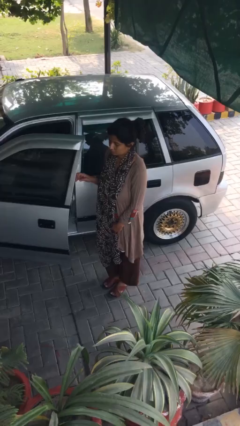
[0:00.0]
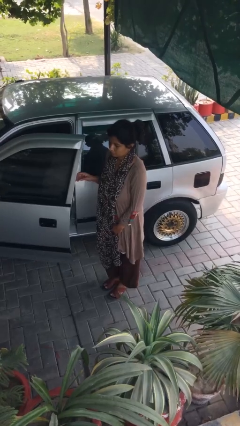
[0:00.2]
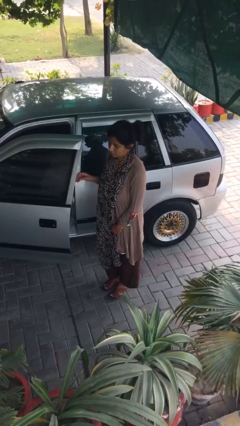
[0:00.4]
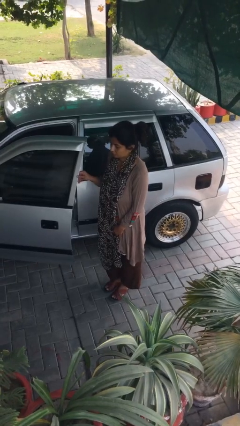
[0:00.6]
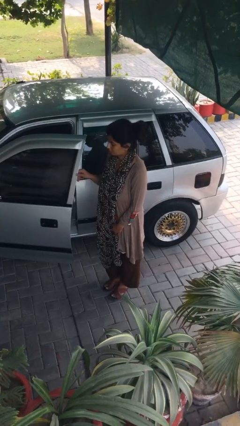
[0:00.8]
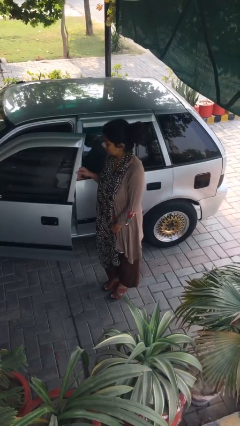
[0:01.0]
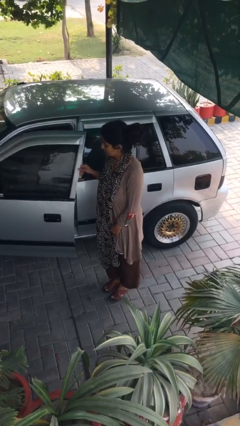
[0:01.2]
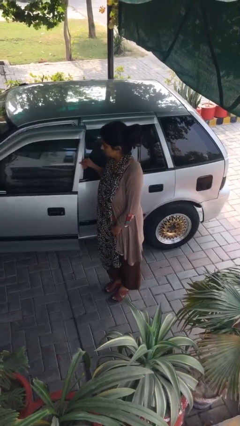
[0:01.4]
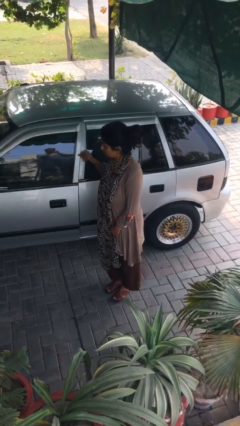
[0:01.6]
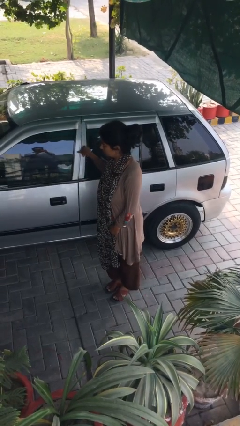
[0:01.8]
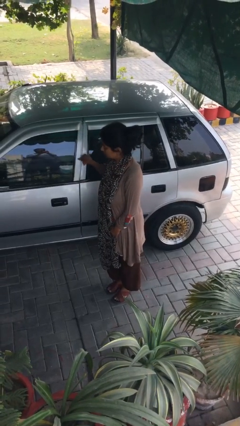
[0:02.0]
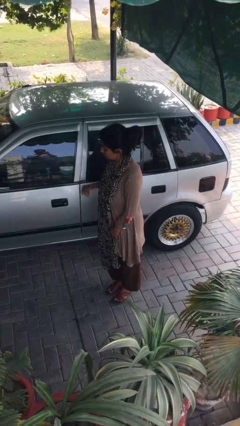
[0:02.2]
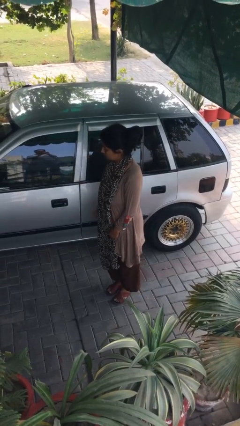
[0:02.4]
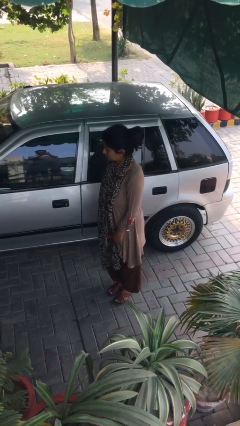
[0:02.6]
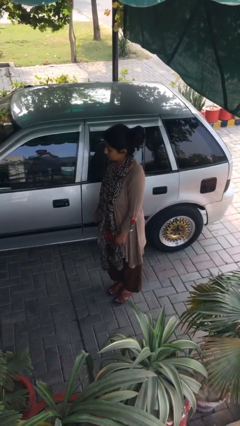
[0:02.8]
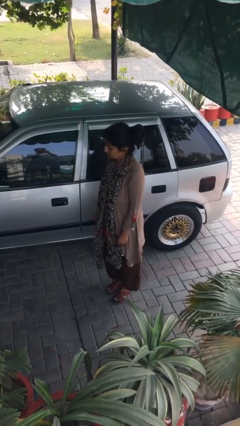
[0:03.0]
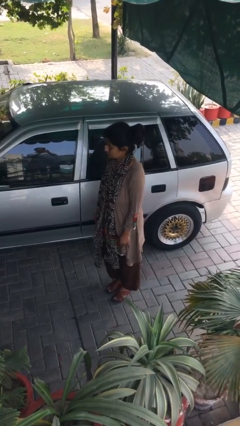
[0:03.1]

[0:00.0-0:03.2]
person closes car door

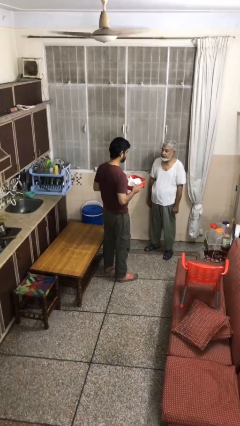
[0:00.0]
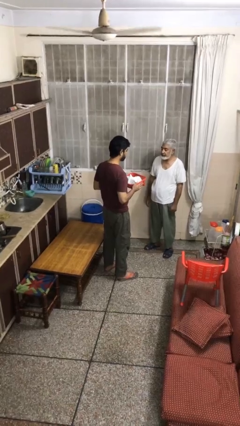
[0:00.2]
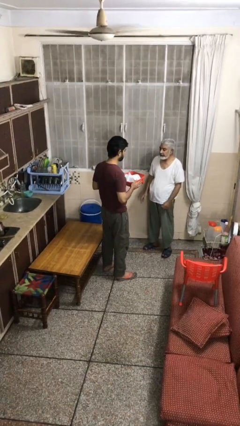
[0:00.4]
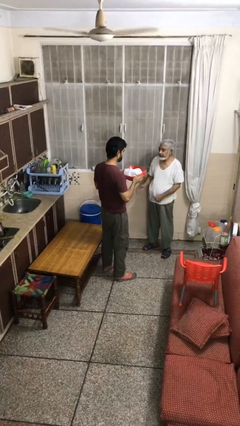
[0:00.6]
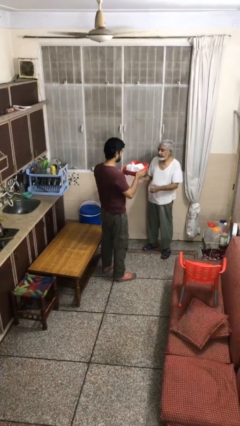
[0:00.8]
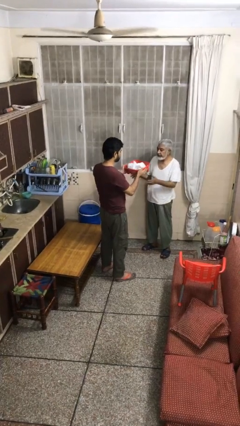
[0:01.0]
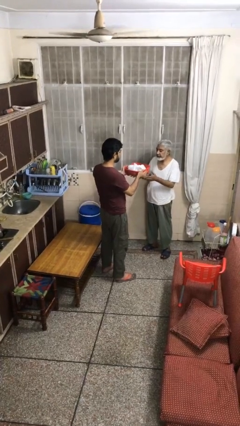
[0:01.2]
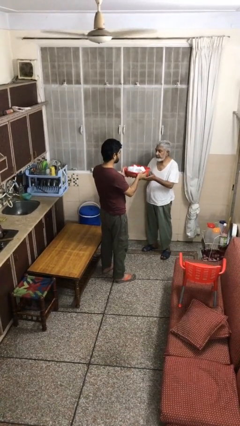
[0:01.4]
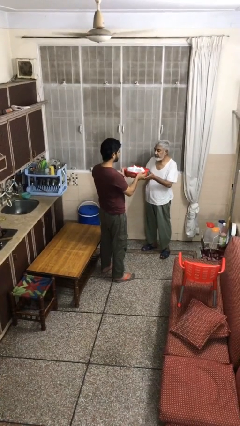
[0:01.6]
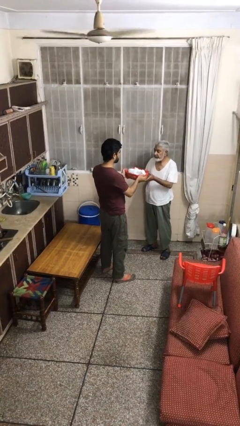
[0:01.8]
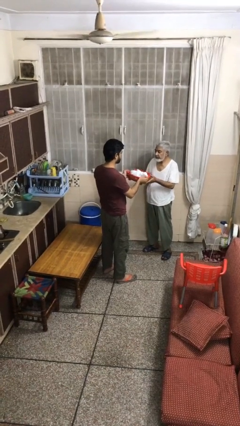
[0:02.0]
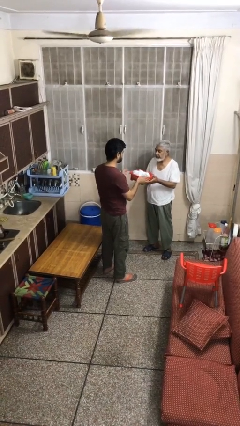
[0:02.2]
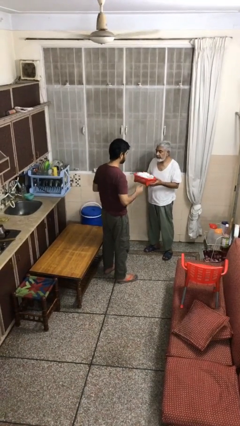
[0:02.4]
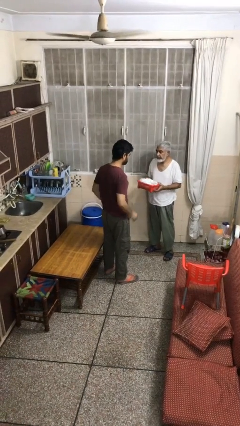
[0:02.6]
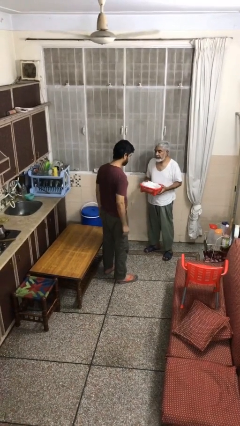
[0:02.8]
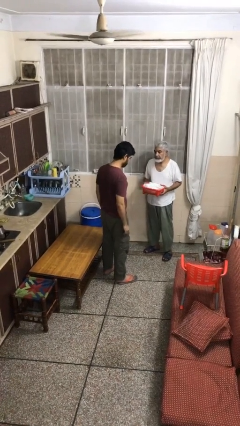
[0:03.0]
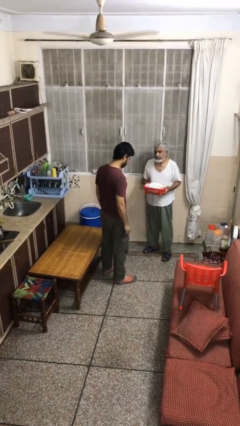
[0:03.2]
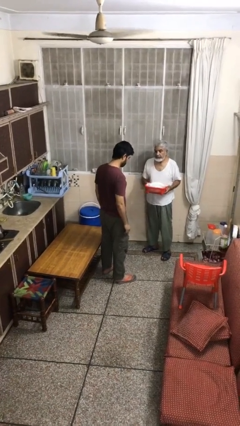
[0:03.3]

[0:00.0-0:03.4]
person transfers object to person

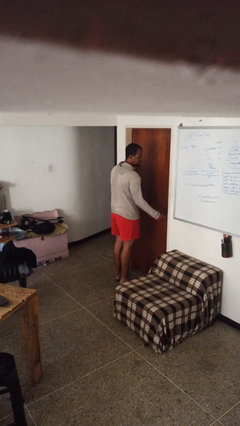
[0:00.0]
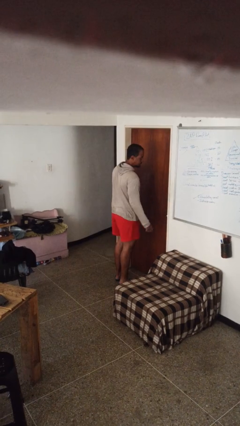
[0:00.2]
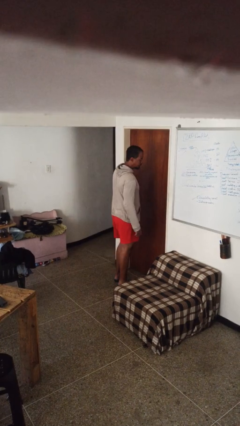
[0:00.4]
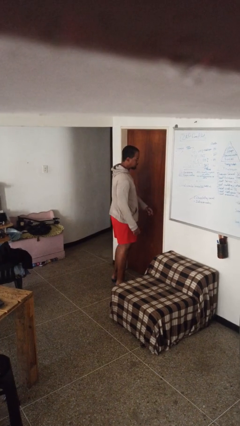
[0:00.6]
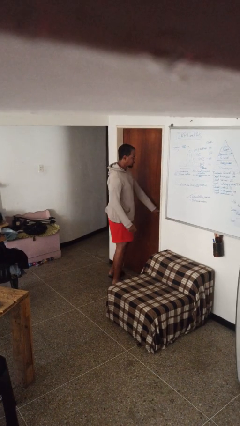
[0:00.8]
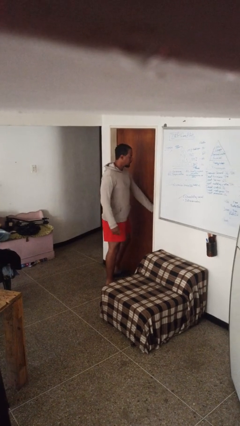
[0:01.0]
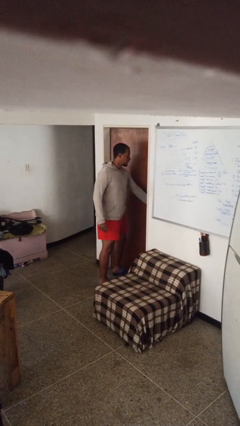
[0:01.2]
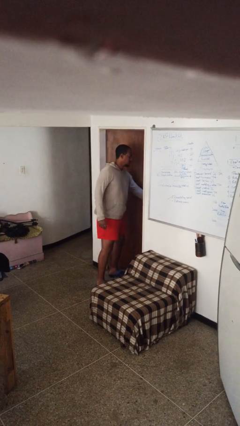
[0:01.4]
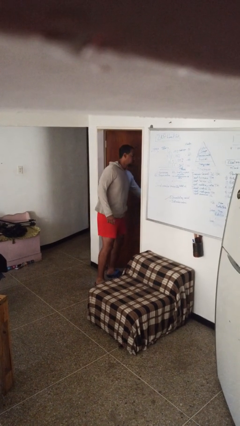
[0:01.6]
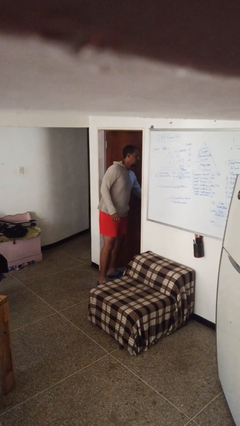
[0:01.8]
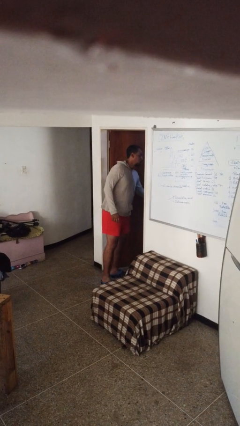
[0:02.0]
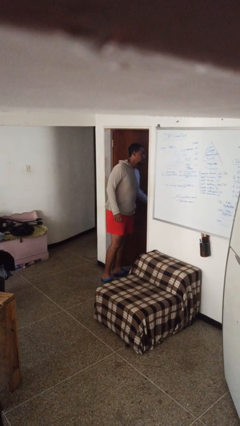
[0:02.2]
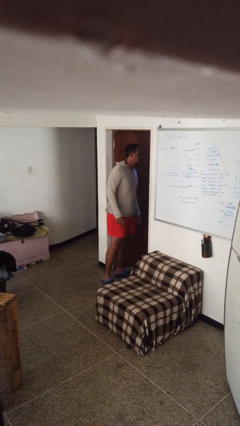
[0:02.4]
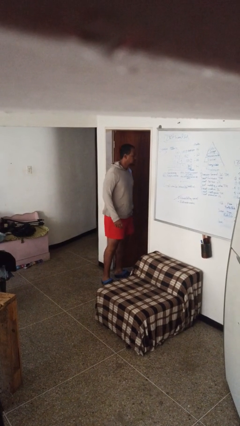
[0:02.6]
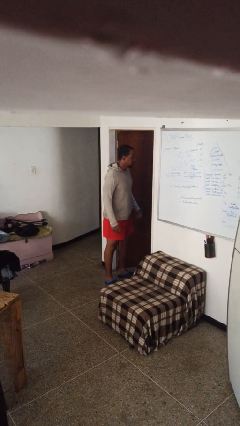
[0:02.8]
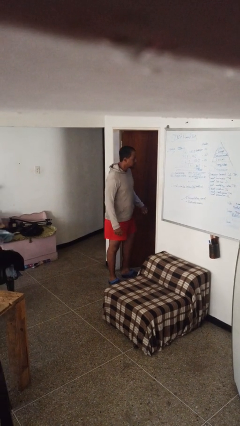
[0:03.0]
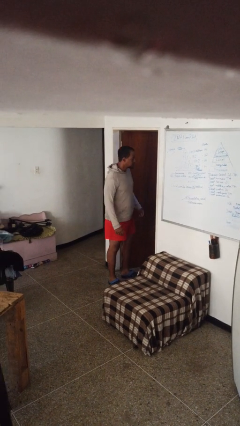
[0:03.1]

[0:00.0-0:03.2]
person opens facility door

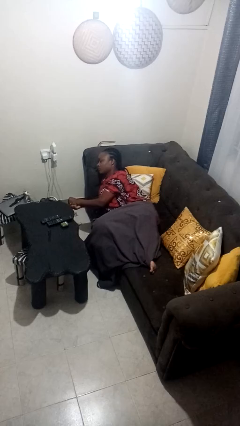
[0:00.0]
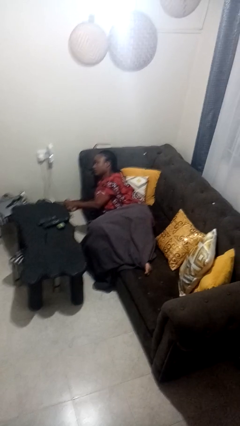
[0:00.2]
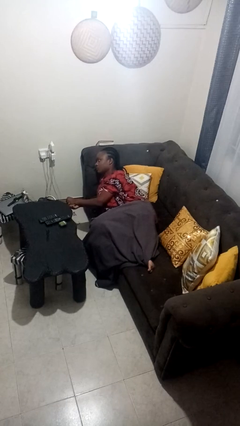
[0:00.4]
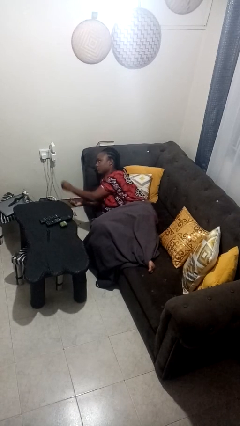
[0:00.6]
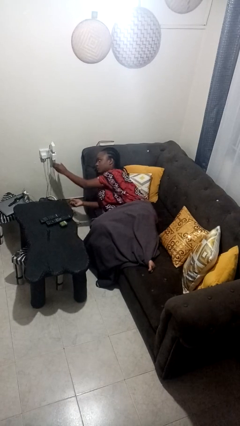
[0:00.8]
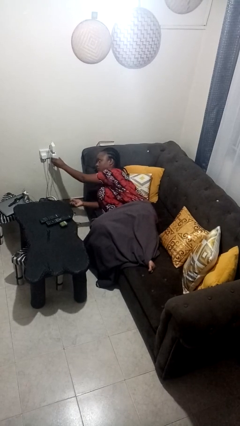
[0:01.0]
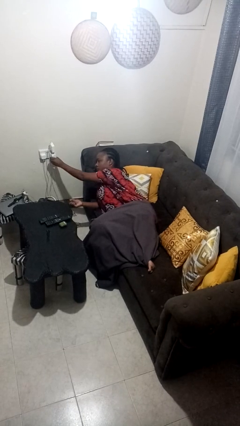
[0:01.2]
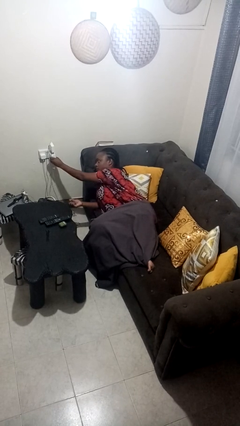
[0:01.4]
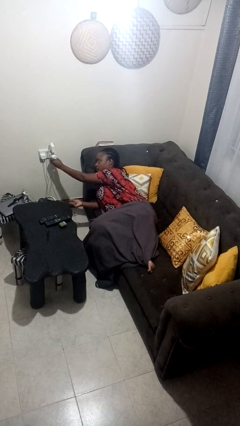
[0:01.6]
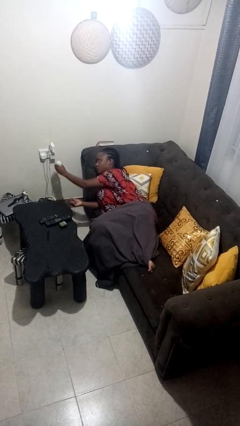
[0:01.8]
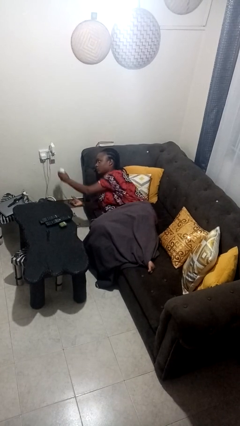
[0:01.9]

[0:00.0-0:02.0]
person unplugs from electrical socket

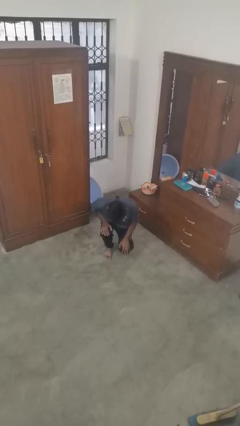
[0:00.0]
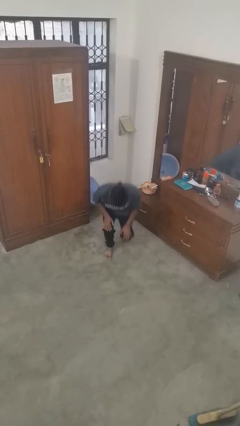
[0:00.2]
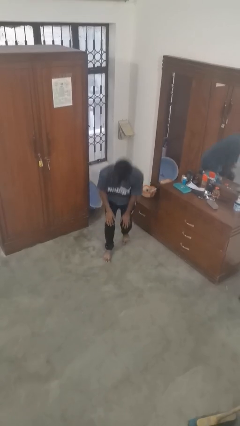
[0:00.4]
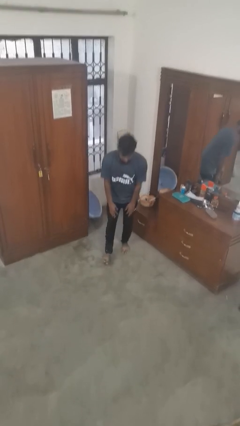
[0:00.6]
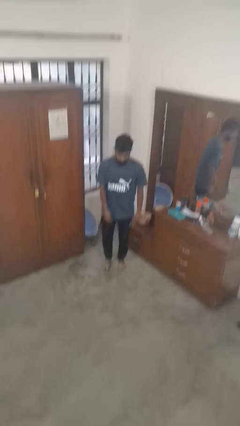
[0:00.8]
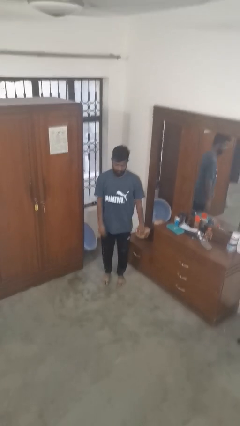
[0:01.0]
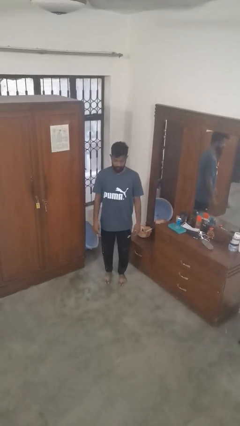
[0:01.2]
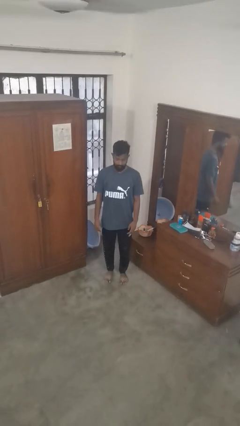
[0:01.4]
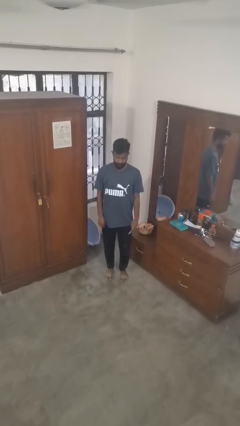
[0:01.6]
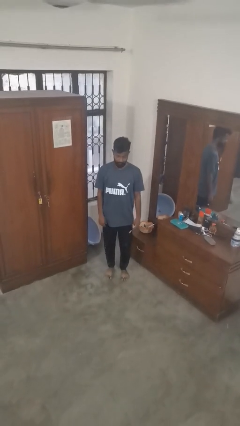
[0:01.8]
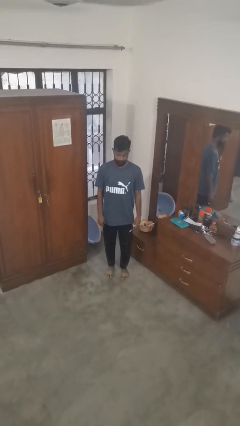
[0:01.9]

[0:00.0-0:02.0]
person stands up from floor

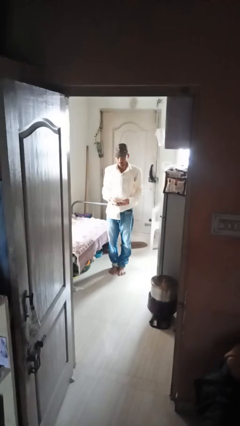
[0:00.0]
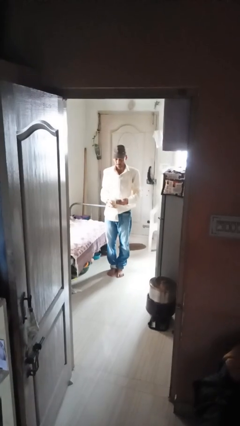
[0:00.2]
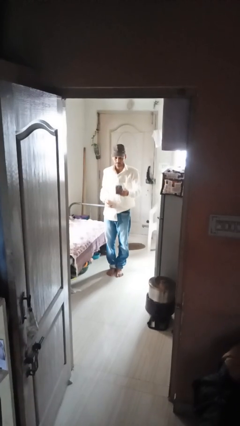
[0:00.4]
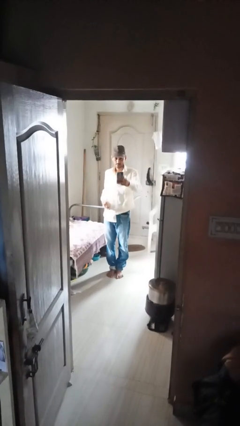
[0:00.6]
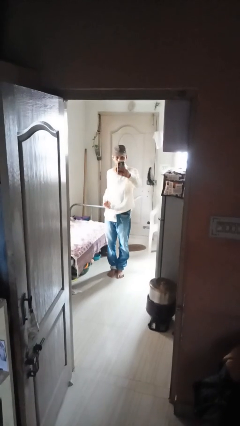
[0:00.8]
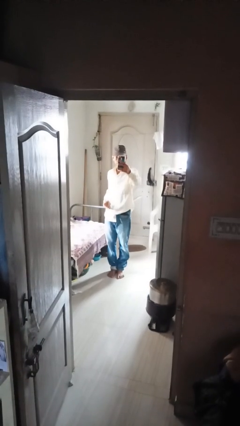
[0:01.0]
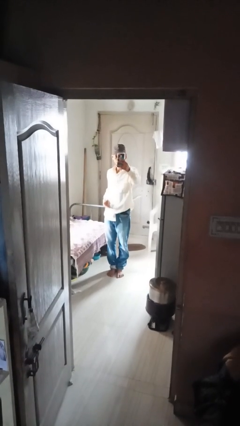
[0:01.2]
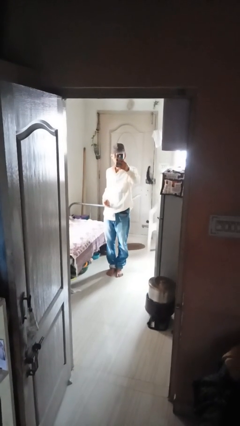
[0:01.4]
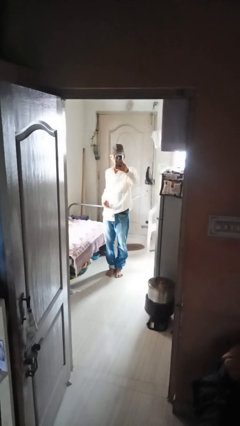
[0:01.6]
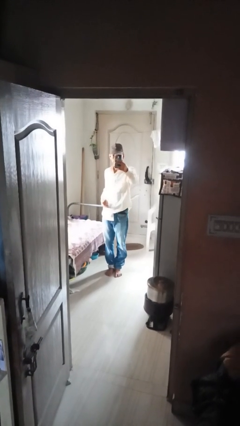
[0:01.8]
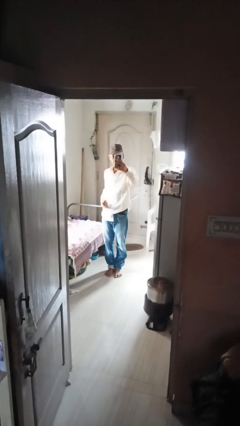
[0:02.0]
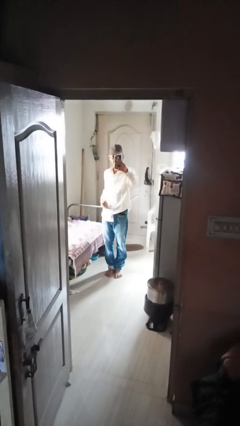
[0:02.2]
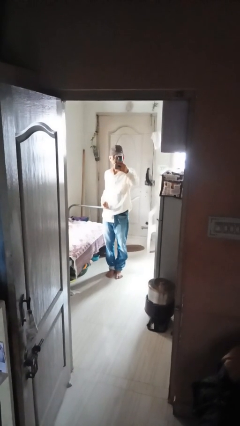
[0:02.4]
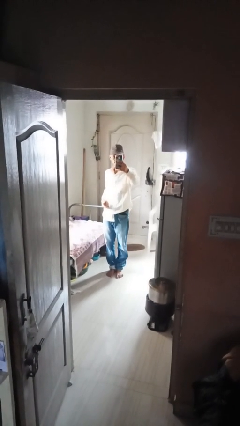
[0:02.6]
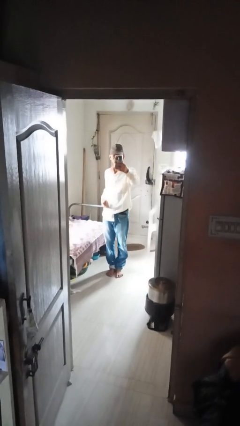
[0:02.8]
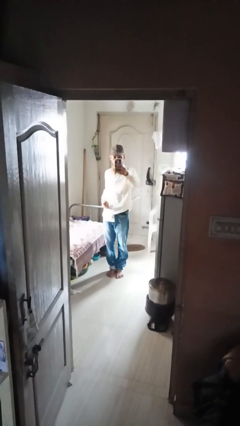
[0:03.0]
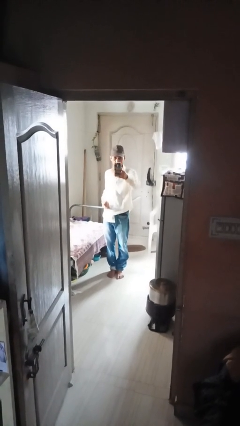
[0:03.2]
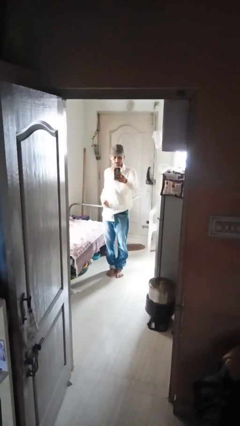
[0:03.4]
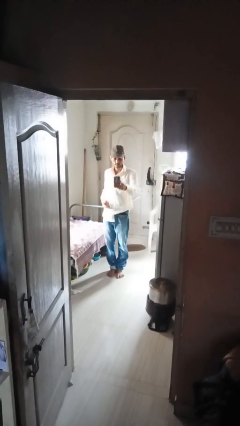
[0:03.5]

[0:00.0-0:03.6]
person takes selfie
